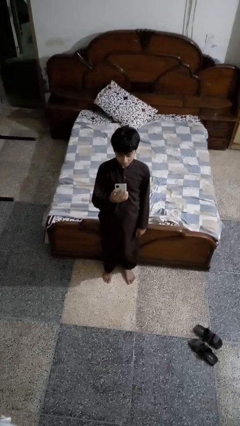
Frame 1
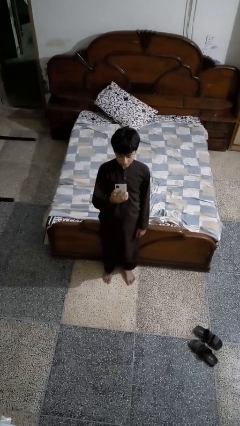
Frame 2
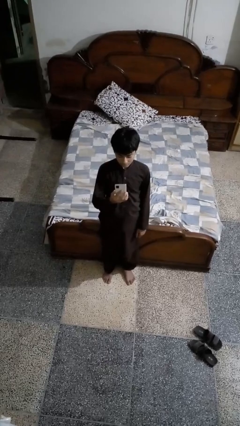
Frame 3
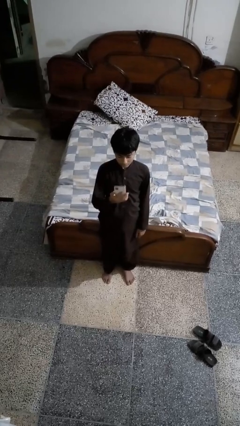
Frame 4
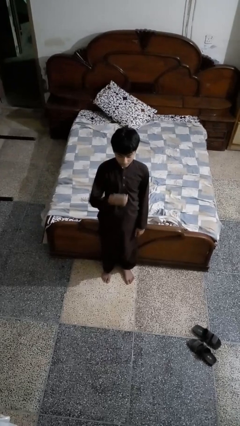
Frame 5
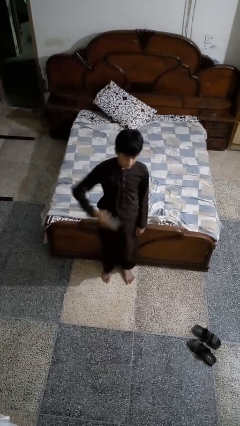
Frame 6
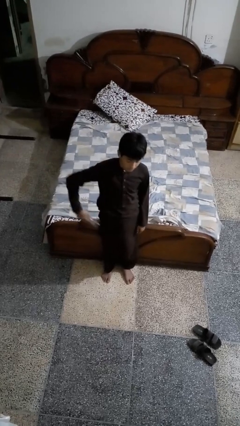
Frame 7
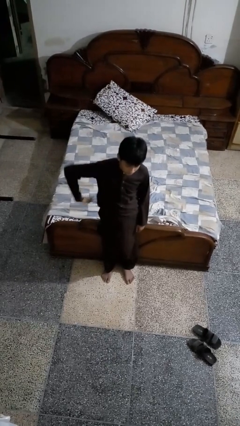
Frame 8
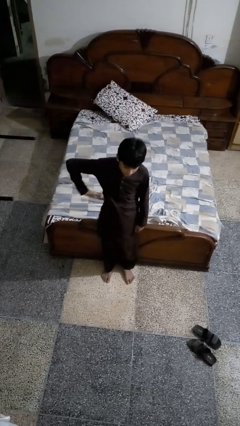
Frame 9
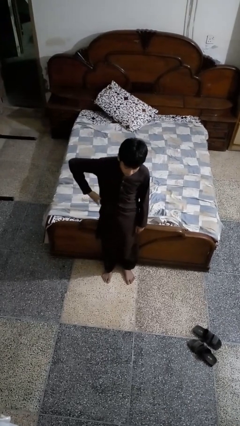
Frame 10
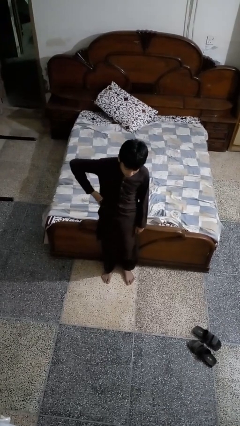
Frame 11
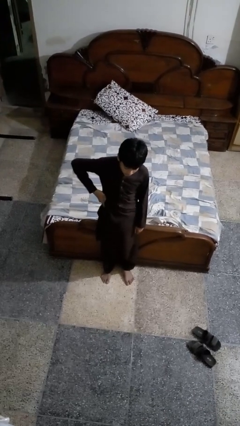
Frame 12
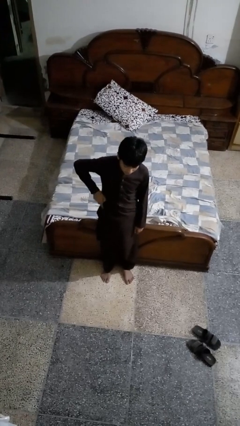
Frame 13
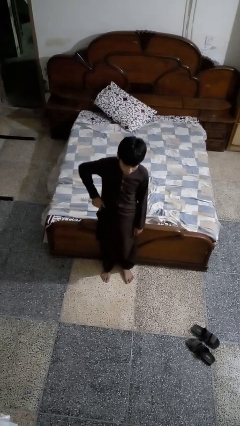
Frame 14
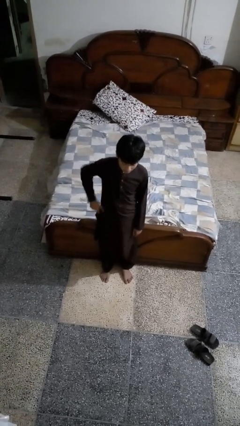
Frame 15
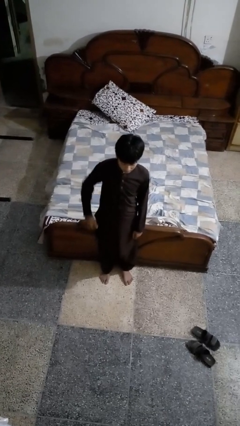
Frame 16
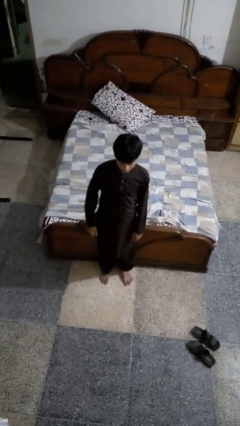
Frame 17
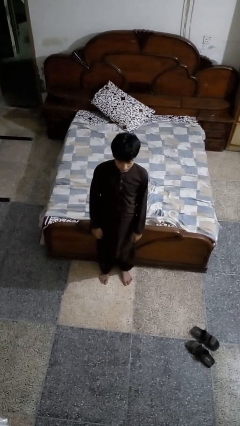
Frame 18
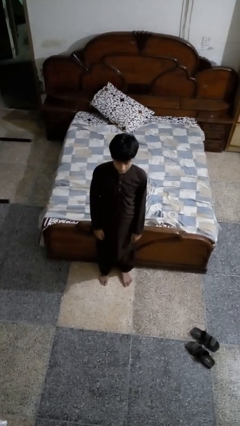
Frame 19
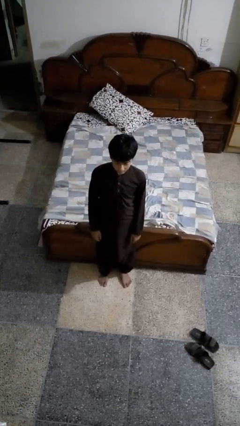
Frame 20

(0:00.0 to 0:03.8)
person puts phone into pocket

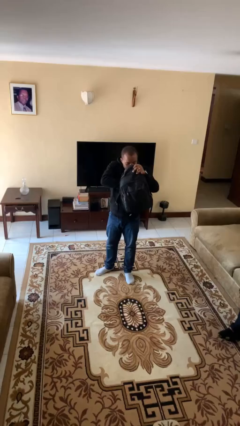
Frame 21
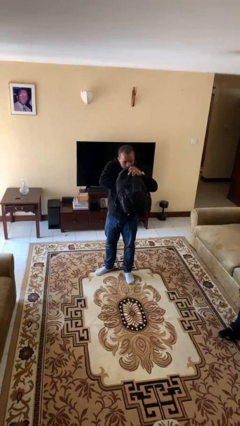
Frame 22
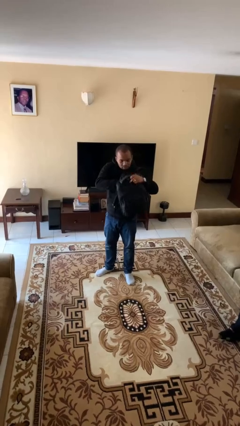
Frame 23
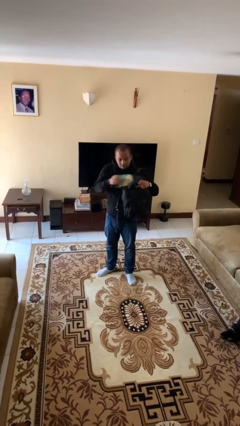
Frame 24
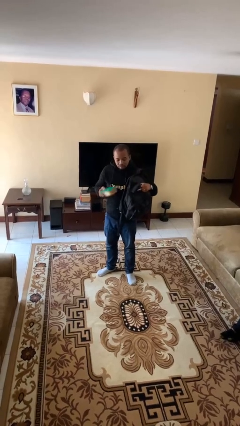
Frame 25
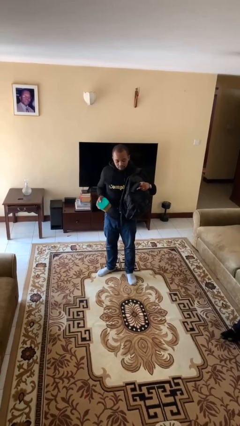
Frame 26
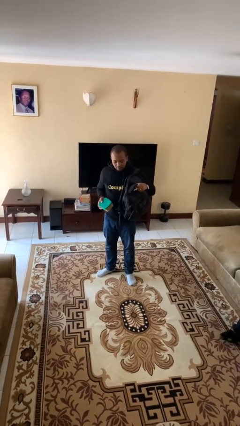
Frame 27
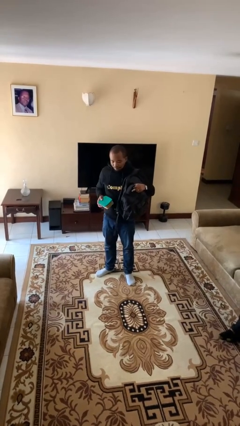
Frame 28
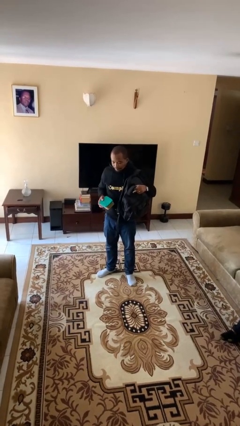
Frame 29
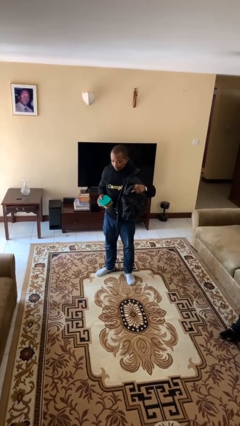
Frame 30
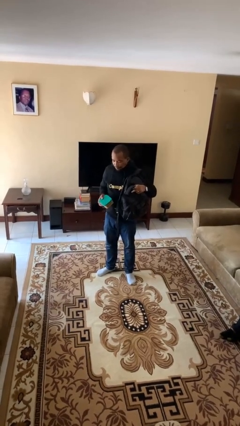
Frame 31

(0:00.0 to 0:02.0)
person takes object from backpack

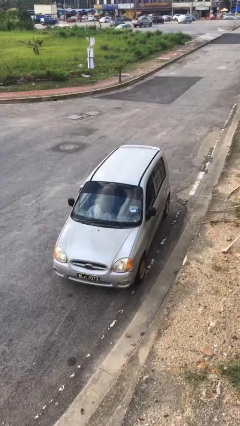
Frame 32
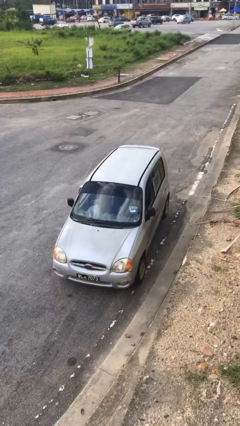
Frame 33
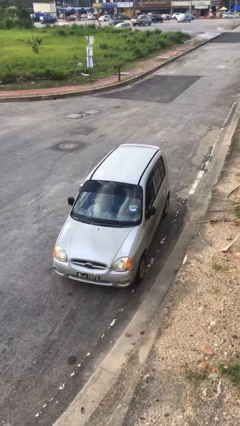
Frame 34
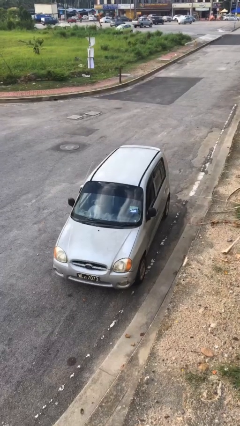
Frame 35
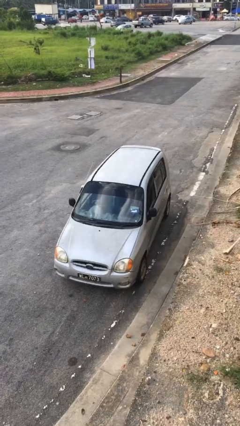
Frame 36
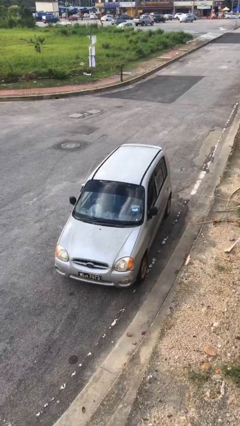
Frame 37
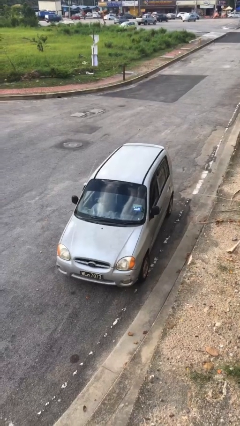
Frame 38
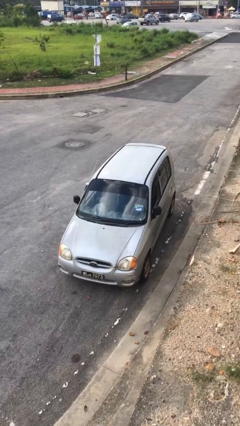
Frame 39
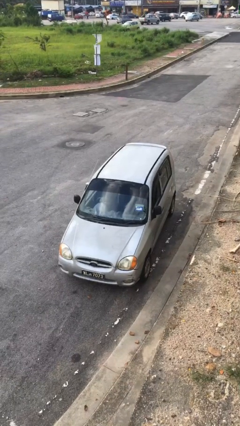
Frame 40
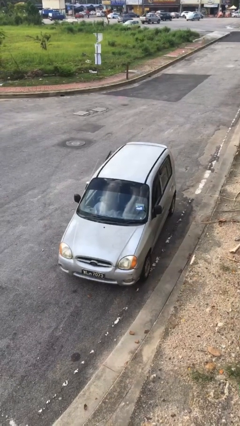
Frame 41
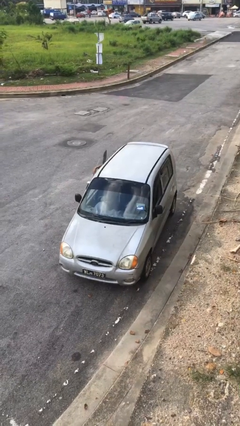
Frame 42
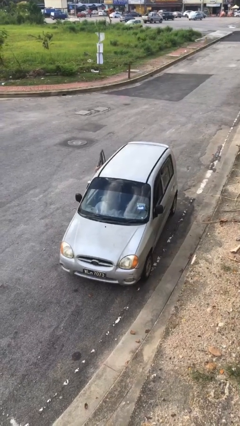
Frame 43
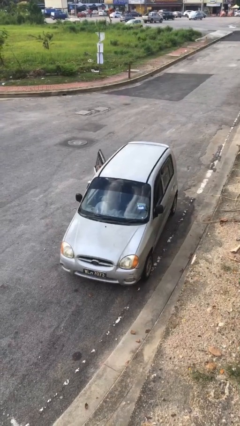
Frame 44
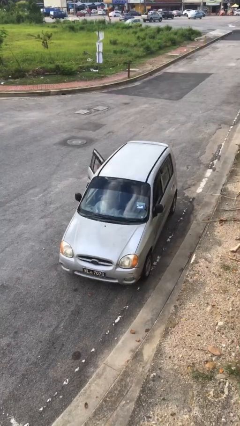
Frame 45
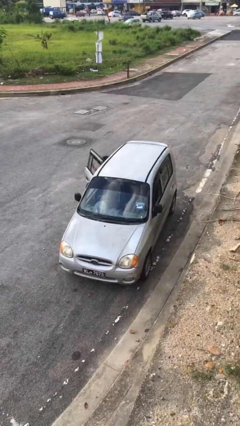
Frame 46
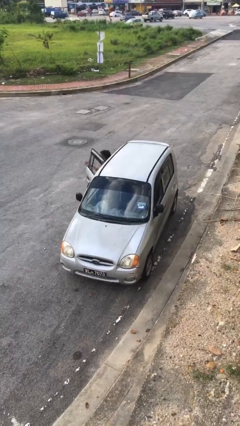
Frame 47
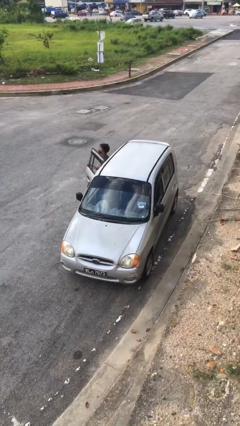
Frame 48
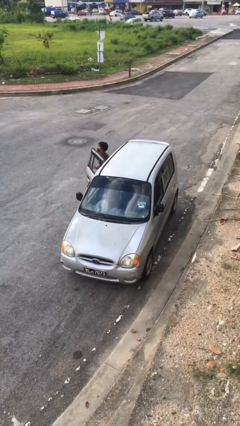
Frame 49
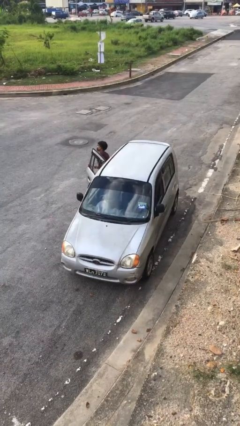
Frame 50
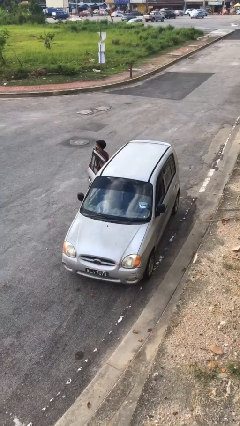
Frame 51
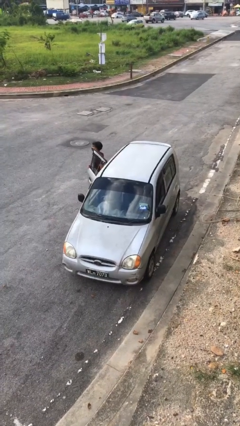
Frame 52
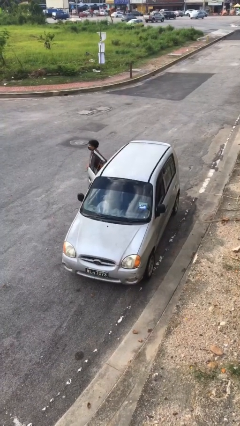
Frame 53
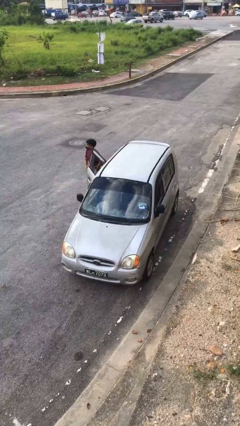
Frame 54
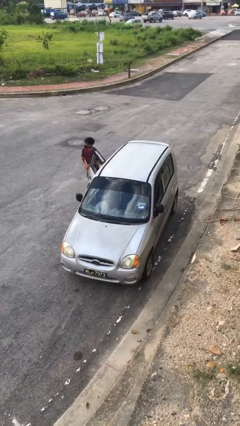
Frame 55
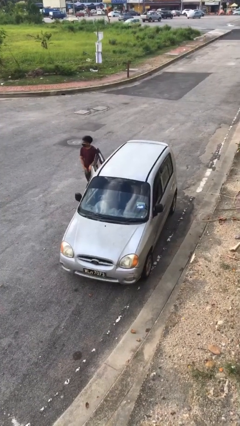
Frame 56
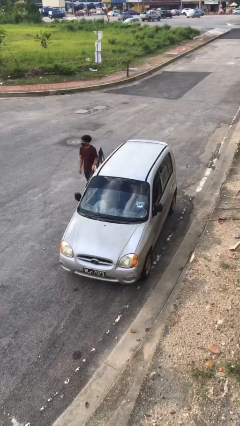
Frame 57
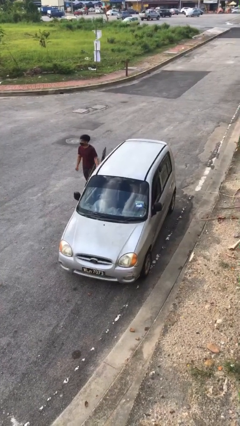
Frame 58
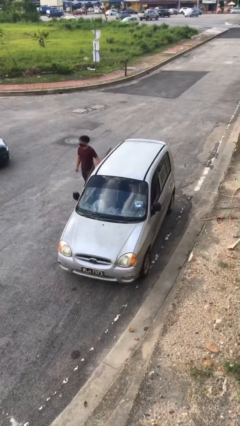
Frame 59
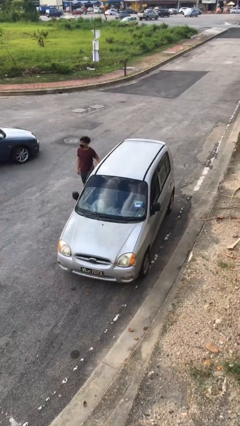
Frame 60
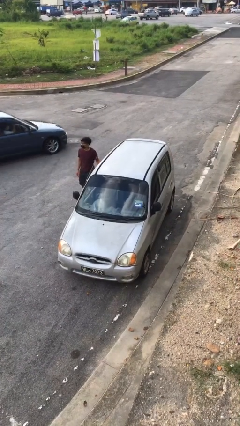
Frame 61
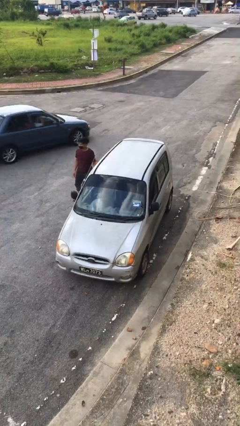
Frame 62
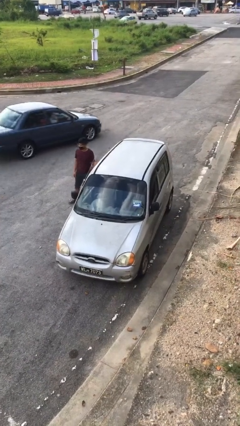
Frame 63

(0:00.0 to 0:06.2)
car drops off person

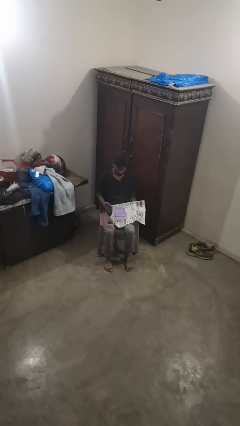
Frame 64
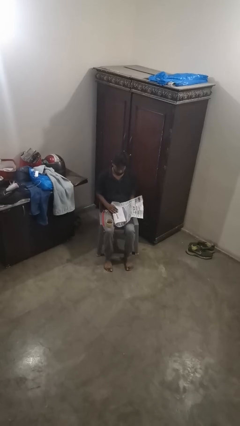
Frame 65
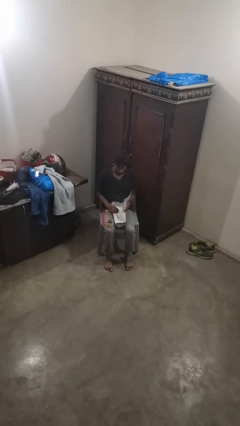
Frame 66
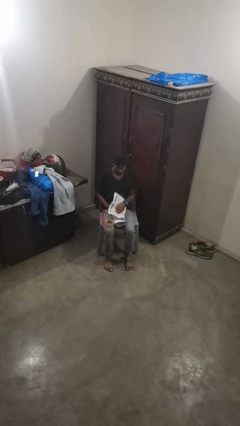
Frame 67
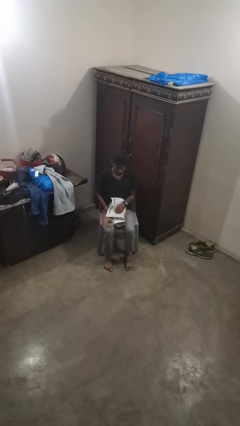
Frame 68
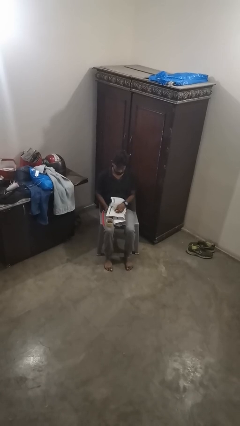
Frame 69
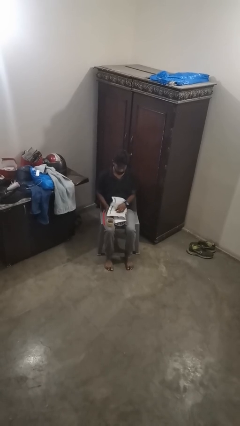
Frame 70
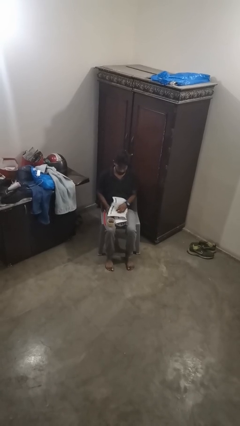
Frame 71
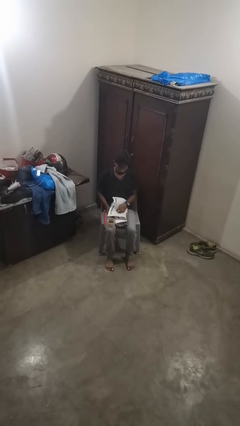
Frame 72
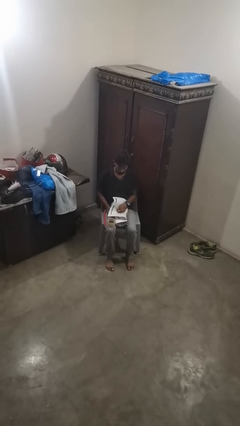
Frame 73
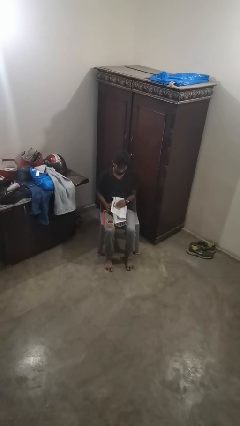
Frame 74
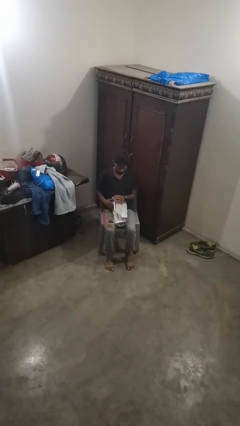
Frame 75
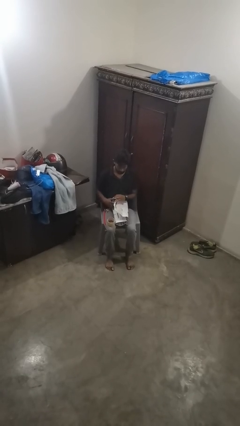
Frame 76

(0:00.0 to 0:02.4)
person wraps box

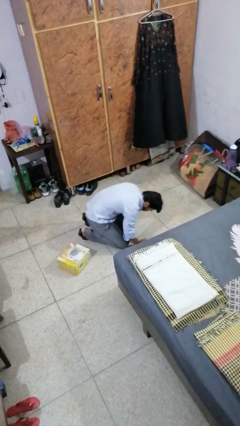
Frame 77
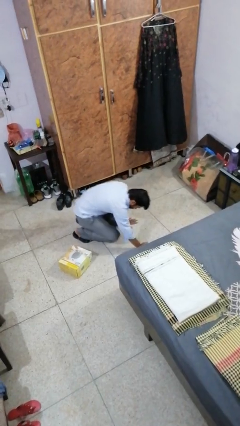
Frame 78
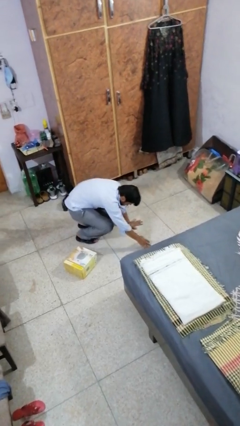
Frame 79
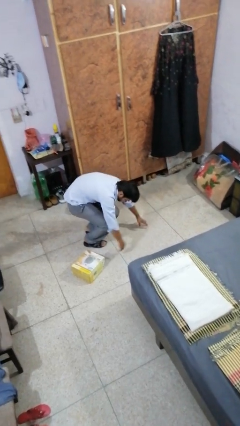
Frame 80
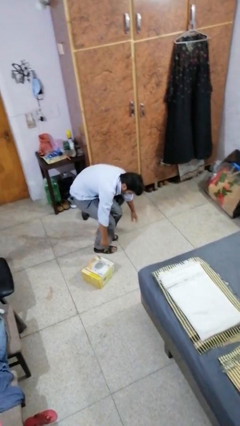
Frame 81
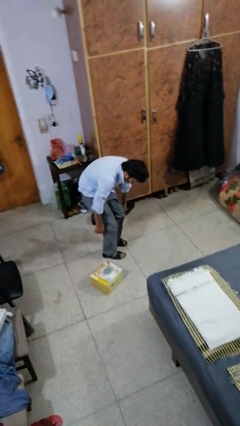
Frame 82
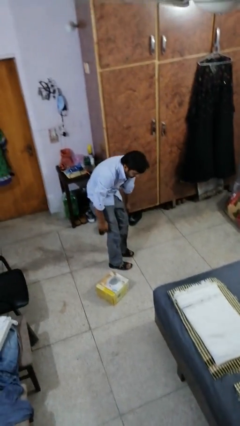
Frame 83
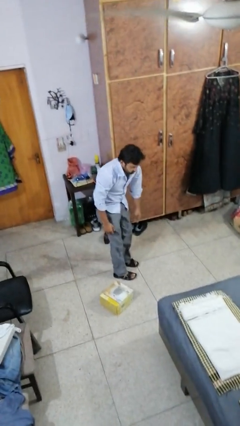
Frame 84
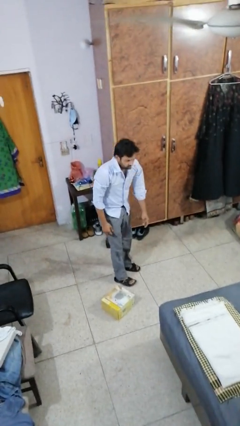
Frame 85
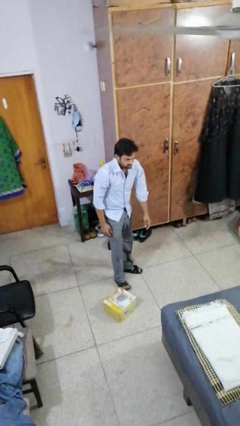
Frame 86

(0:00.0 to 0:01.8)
person stands up from floor

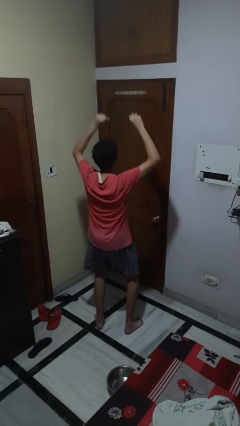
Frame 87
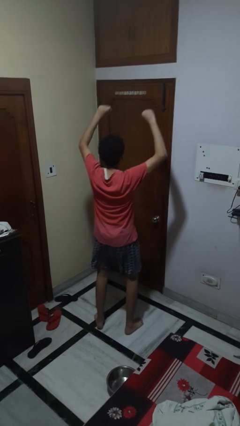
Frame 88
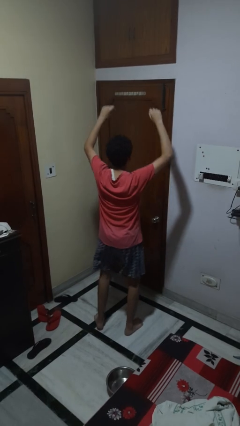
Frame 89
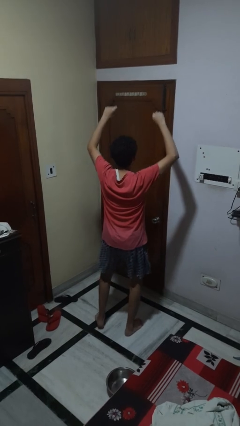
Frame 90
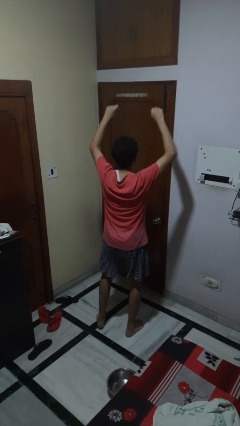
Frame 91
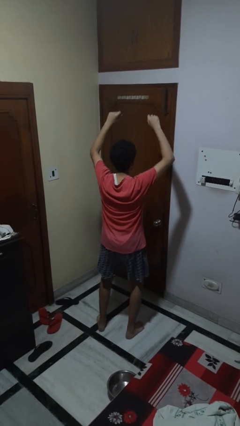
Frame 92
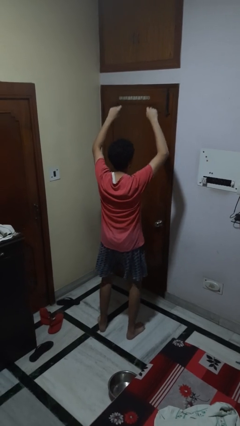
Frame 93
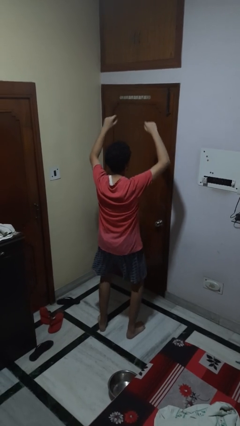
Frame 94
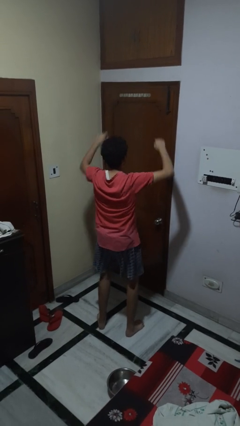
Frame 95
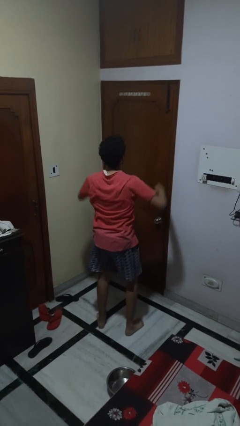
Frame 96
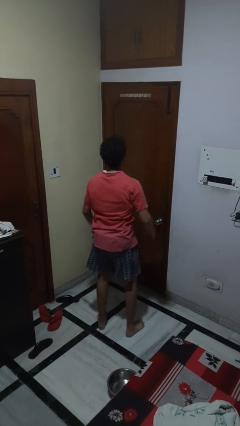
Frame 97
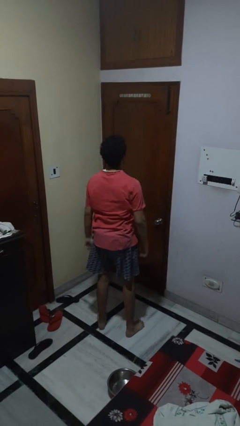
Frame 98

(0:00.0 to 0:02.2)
person dances in place
